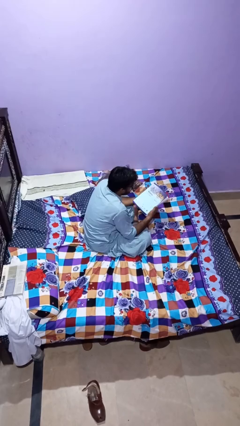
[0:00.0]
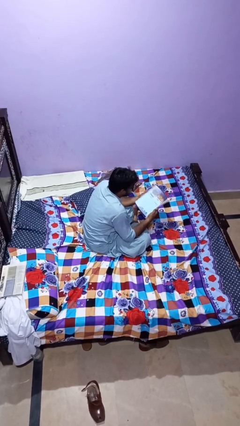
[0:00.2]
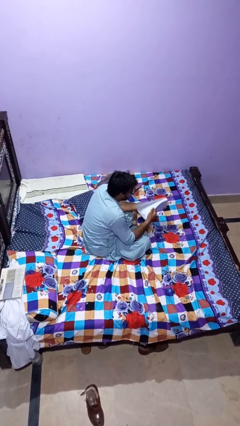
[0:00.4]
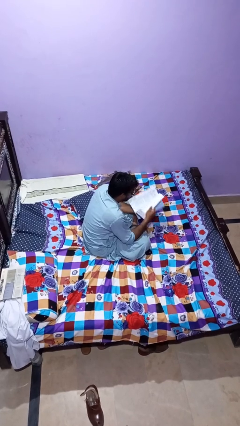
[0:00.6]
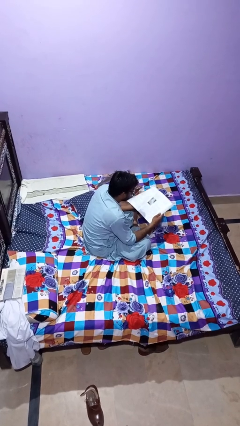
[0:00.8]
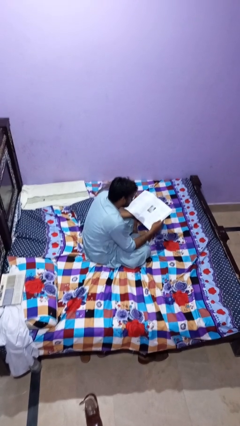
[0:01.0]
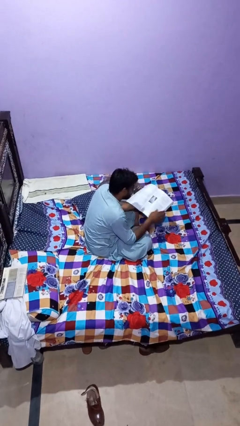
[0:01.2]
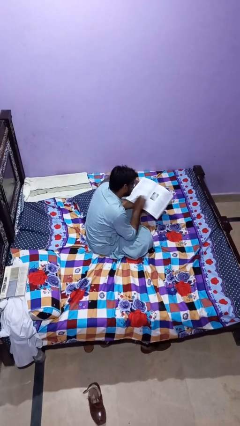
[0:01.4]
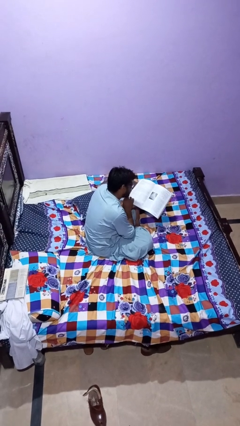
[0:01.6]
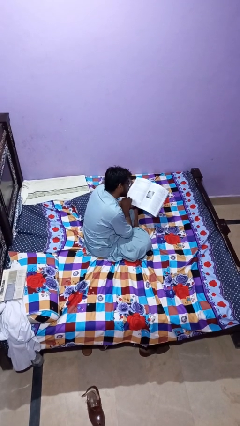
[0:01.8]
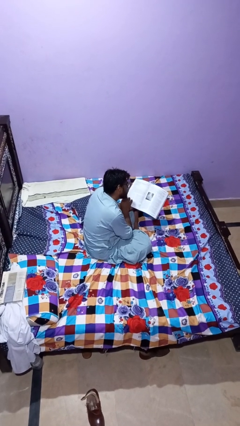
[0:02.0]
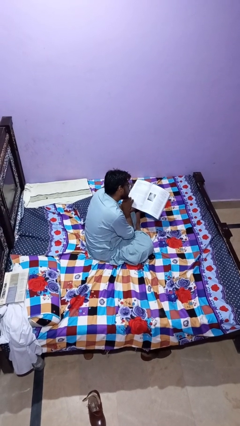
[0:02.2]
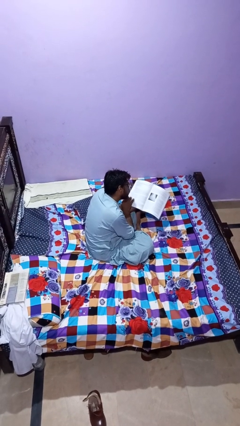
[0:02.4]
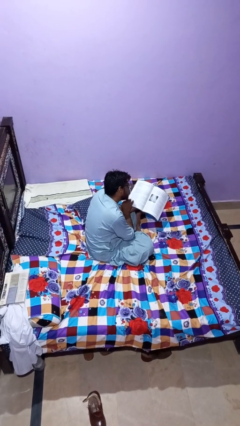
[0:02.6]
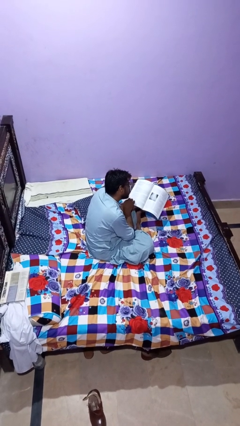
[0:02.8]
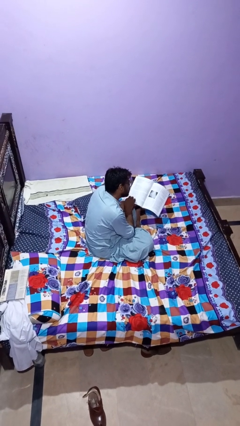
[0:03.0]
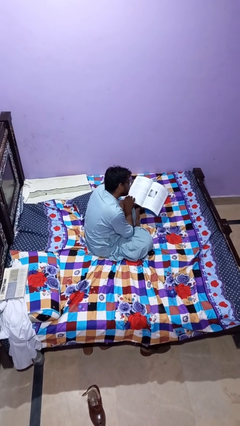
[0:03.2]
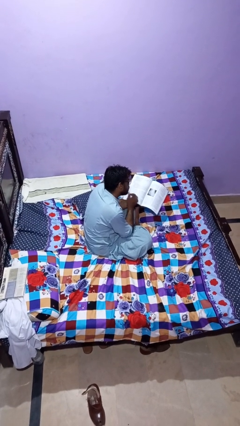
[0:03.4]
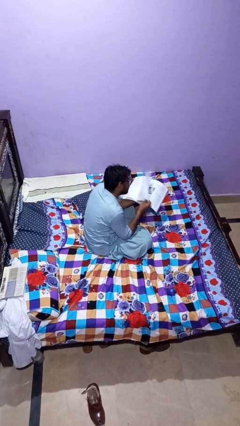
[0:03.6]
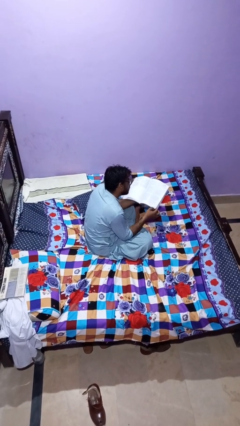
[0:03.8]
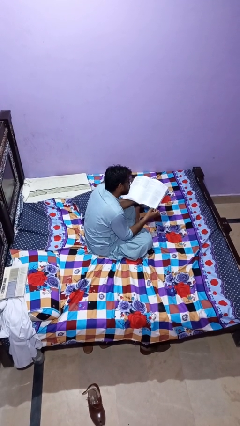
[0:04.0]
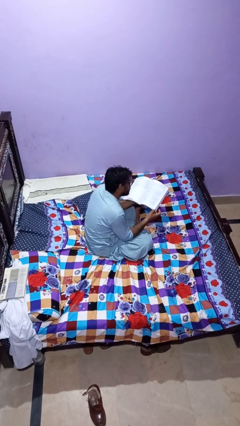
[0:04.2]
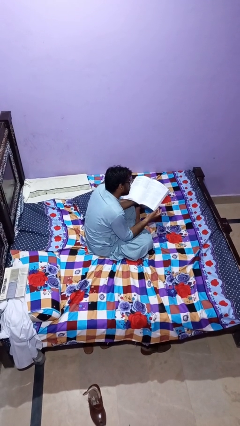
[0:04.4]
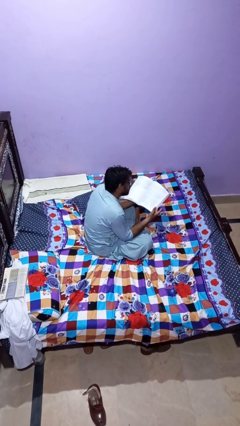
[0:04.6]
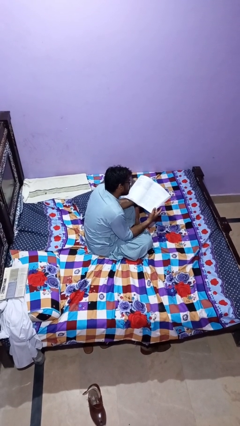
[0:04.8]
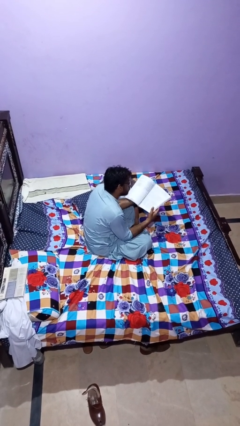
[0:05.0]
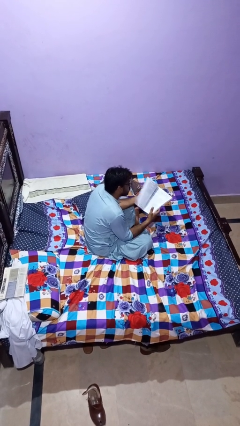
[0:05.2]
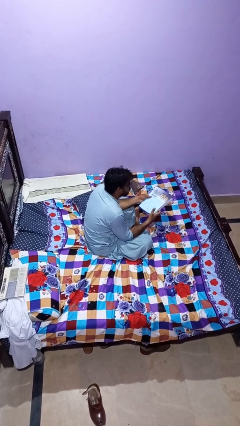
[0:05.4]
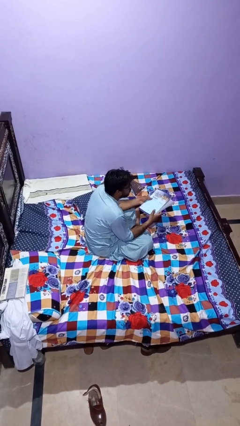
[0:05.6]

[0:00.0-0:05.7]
person reads magazine

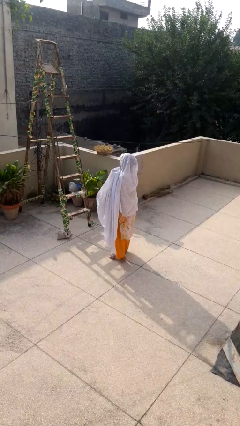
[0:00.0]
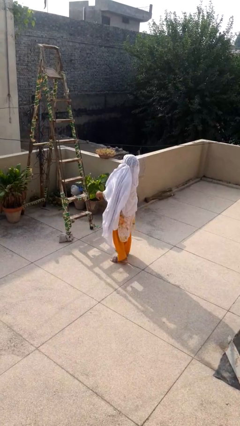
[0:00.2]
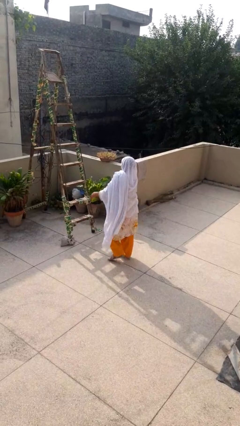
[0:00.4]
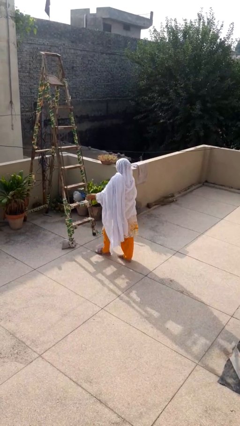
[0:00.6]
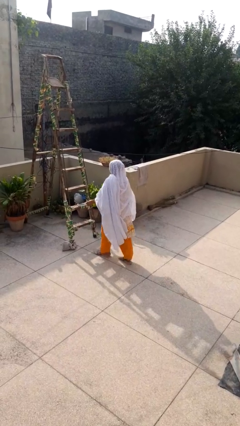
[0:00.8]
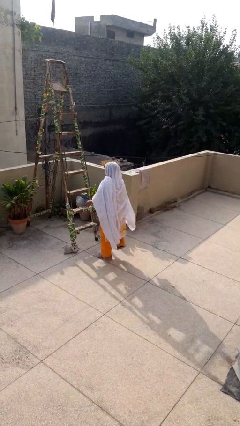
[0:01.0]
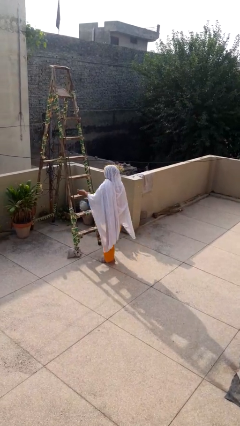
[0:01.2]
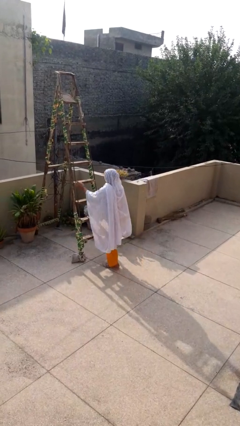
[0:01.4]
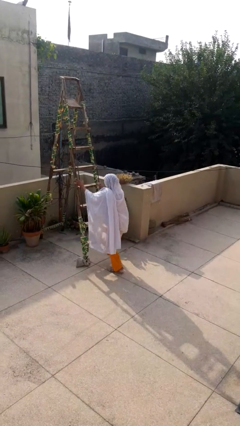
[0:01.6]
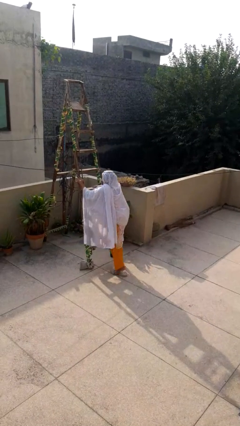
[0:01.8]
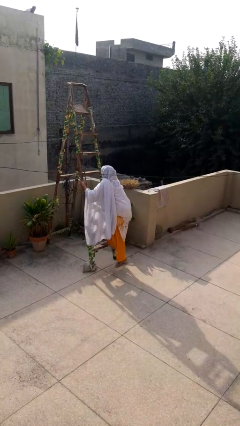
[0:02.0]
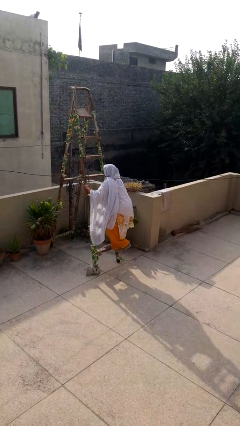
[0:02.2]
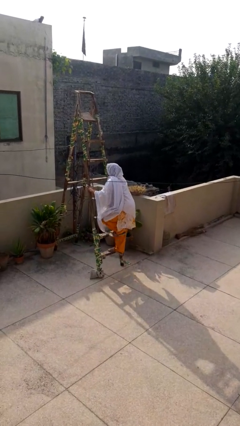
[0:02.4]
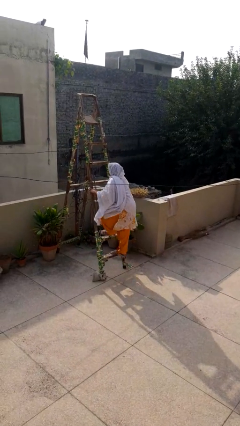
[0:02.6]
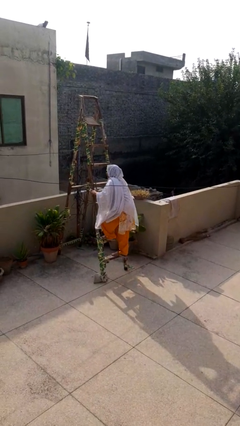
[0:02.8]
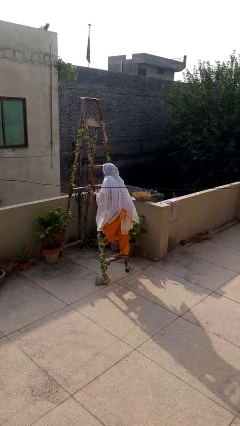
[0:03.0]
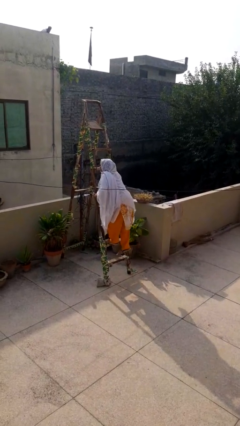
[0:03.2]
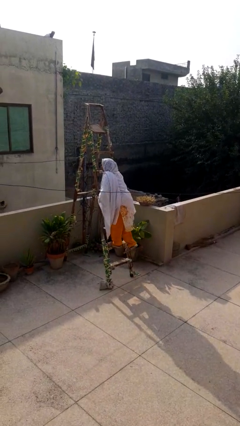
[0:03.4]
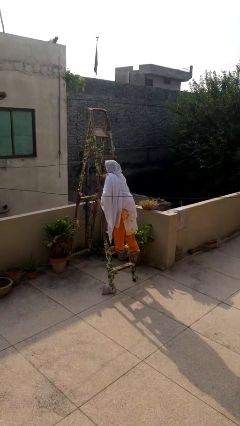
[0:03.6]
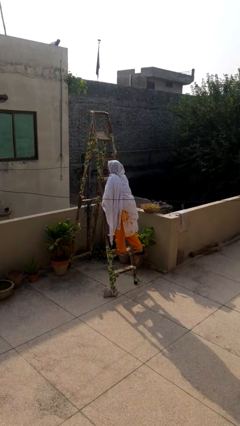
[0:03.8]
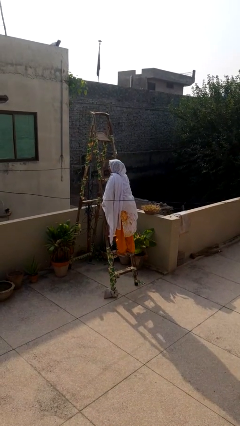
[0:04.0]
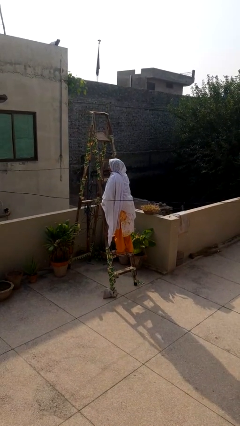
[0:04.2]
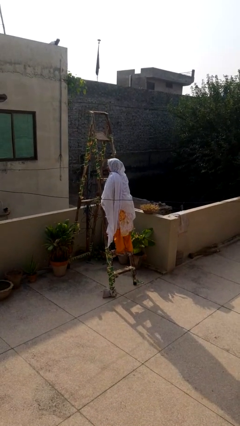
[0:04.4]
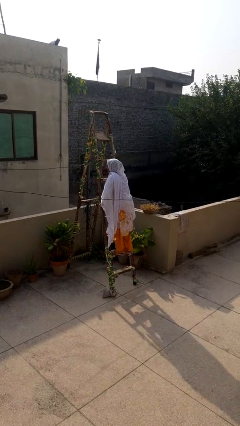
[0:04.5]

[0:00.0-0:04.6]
person climbs up ladder

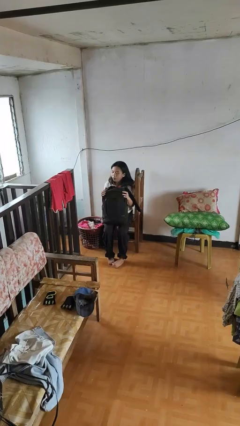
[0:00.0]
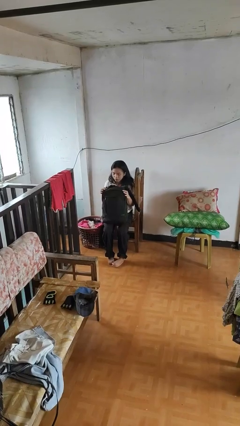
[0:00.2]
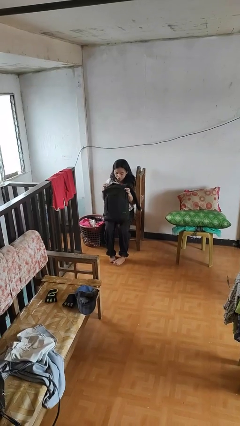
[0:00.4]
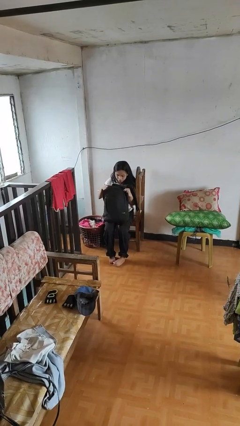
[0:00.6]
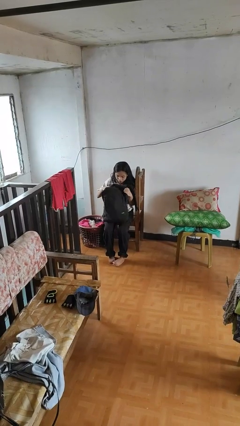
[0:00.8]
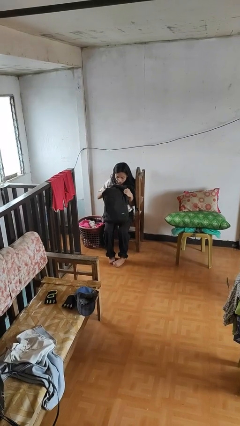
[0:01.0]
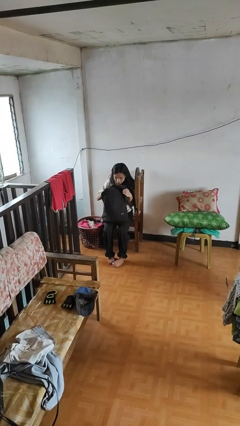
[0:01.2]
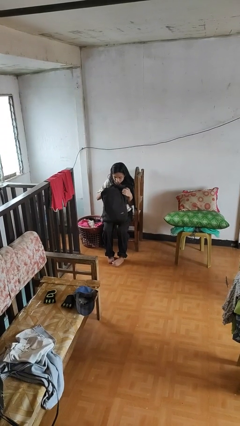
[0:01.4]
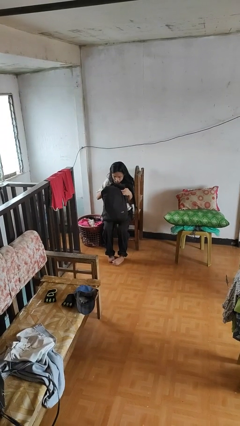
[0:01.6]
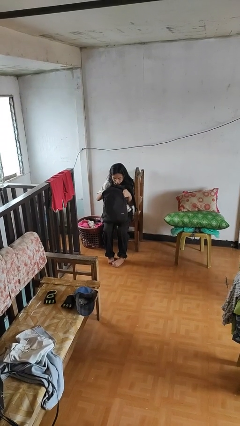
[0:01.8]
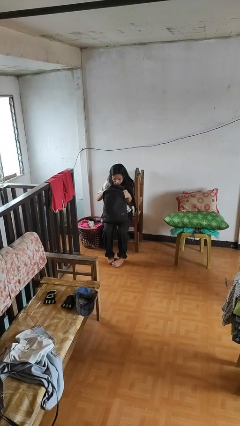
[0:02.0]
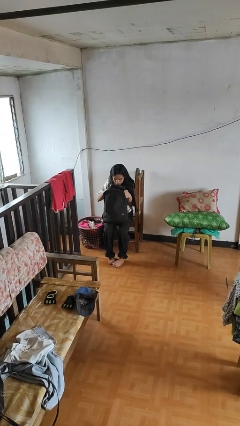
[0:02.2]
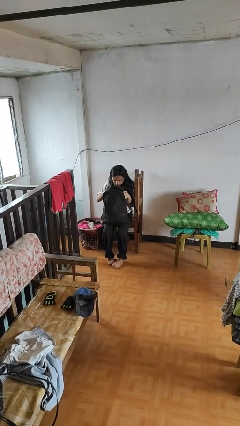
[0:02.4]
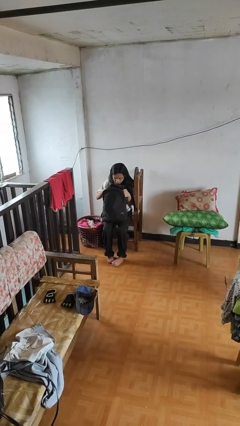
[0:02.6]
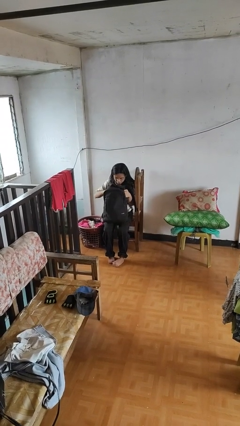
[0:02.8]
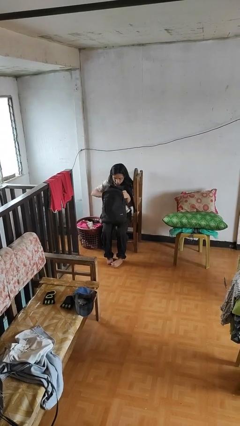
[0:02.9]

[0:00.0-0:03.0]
person searches in backpack

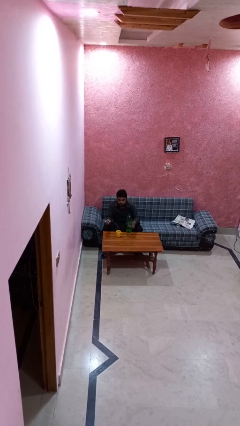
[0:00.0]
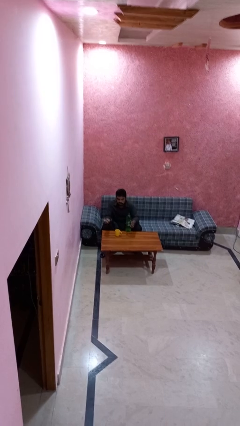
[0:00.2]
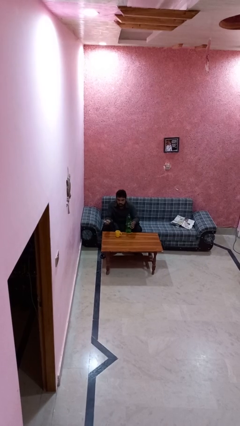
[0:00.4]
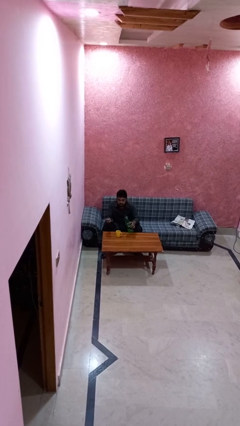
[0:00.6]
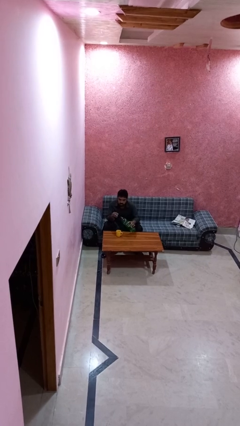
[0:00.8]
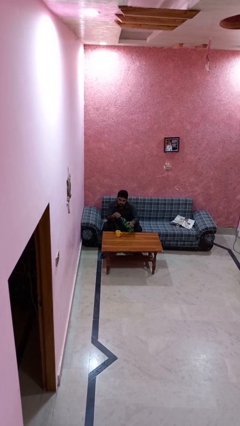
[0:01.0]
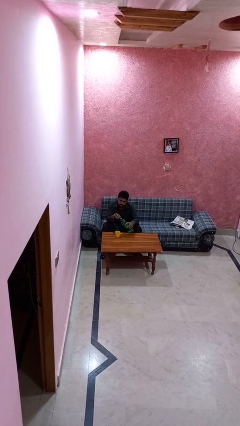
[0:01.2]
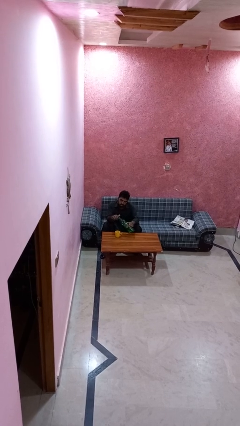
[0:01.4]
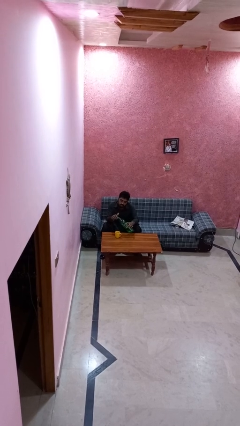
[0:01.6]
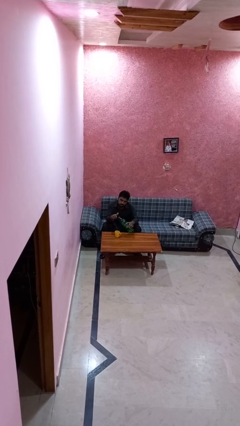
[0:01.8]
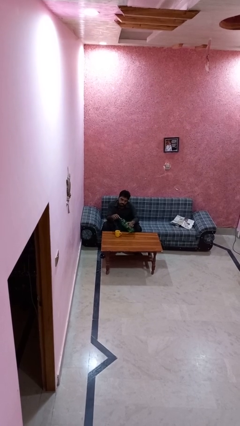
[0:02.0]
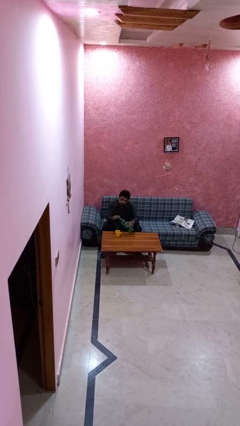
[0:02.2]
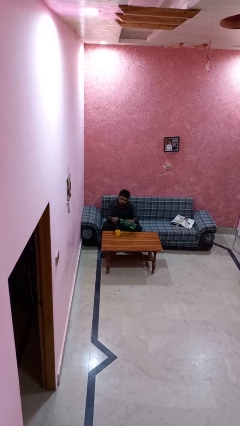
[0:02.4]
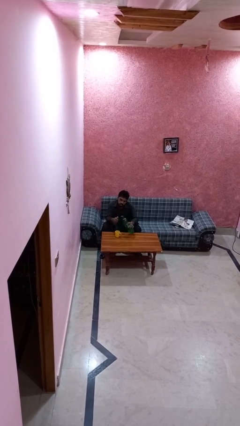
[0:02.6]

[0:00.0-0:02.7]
person screws lid to bottle

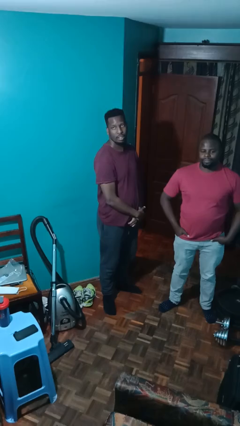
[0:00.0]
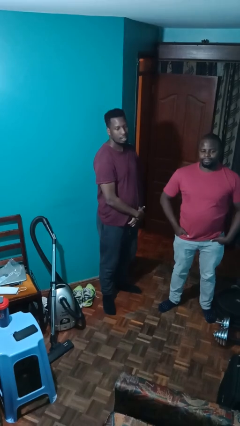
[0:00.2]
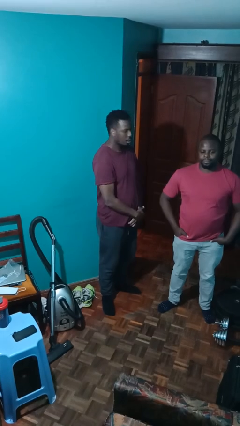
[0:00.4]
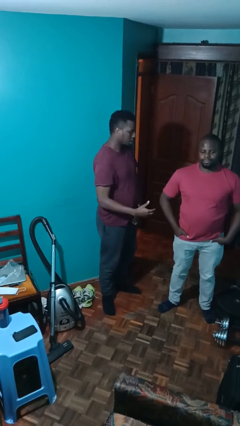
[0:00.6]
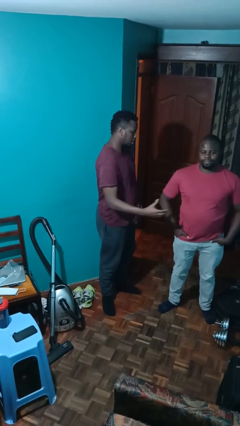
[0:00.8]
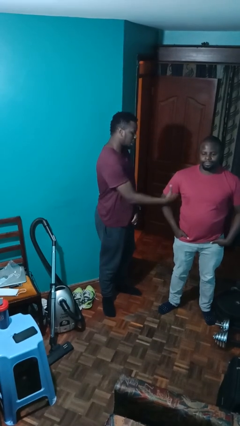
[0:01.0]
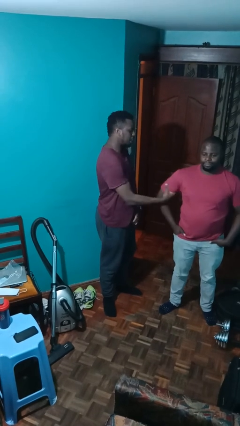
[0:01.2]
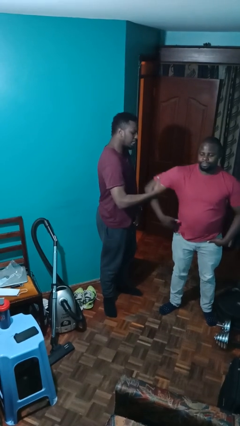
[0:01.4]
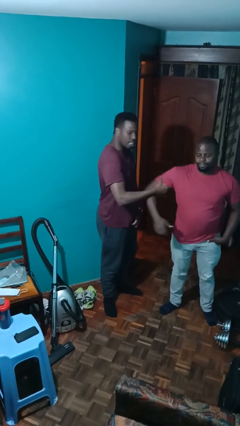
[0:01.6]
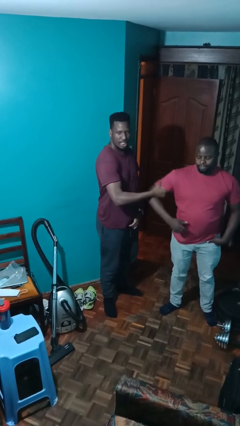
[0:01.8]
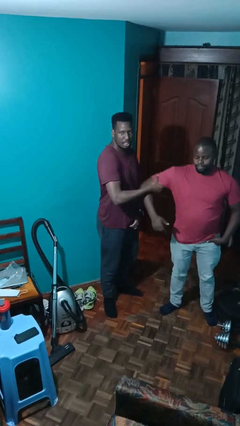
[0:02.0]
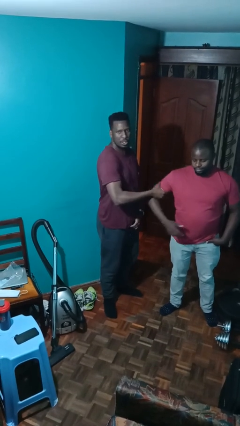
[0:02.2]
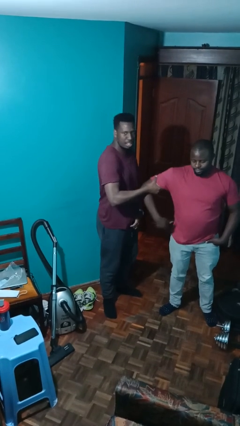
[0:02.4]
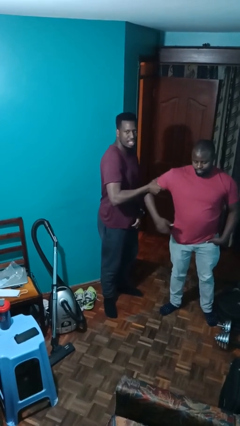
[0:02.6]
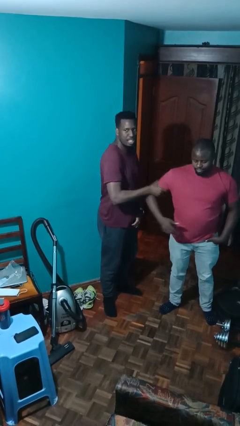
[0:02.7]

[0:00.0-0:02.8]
person grabs person by bicep
